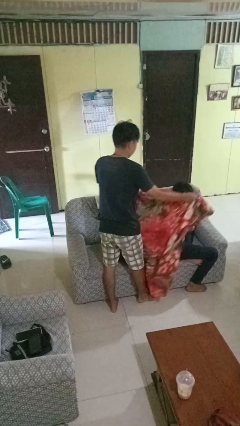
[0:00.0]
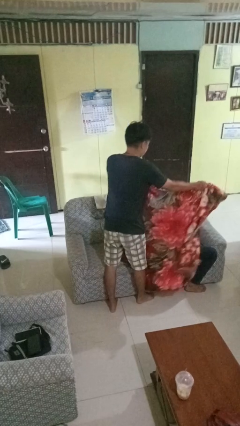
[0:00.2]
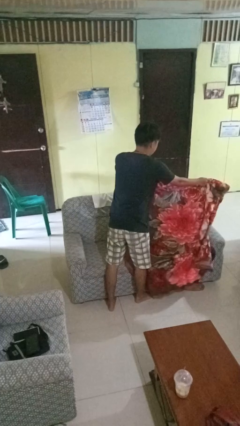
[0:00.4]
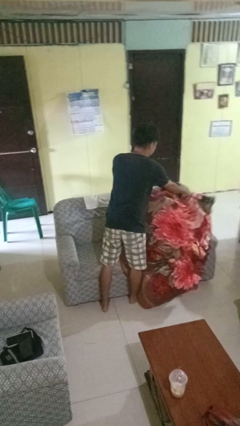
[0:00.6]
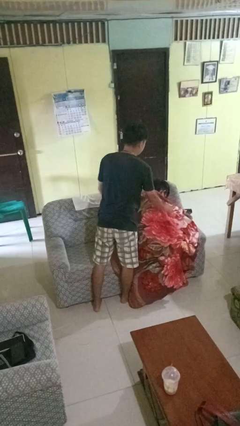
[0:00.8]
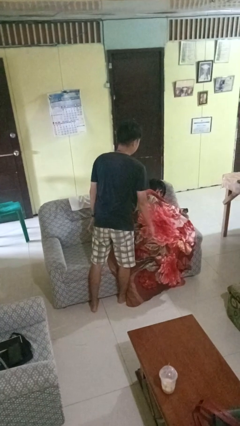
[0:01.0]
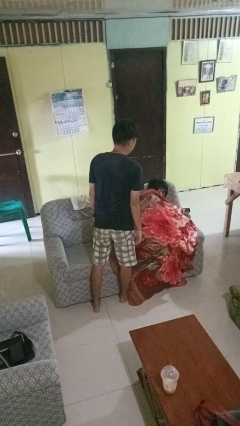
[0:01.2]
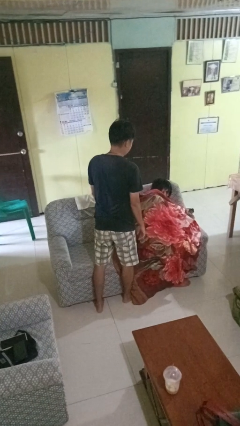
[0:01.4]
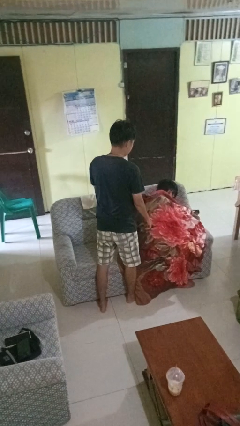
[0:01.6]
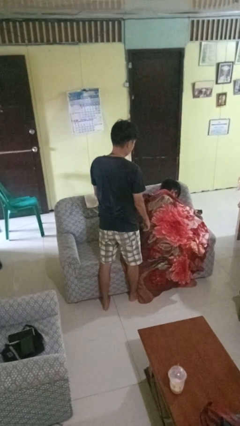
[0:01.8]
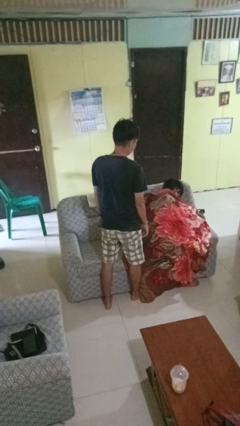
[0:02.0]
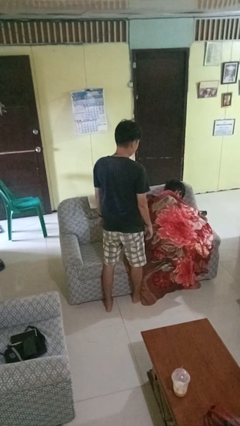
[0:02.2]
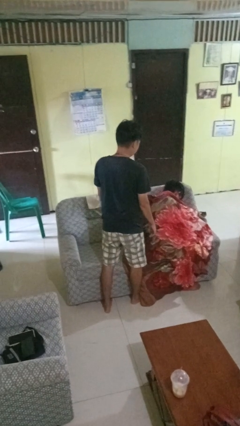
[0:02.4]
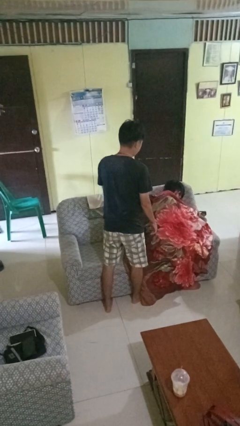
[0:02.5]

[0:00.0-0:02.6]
person covers friend with blanket

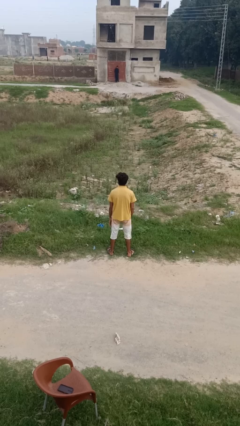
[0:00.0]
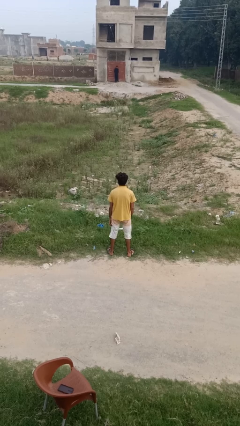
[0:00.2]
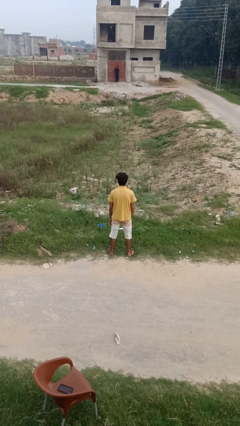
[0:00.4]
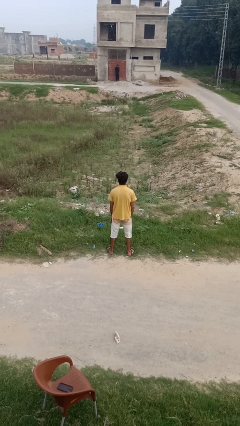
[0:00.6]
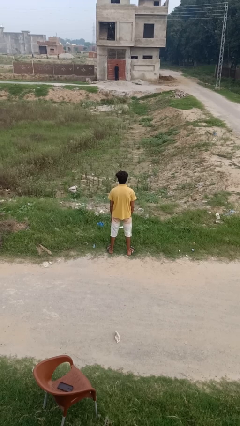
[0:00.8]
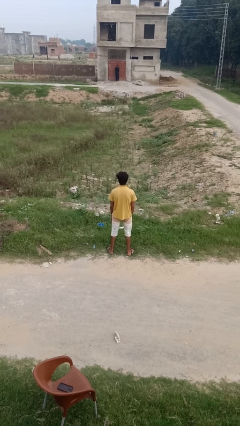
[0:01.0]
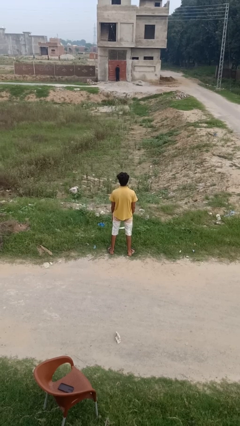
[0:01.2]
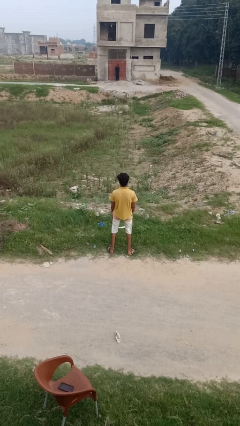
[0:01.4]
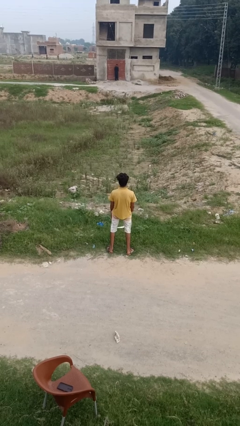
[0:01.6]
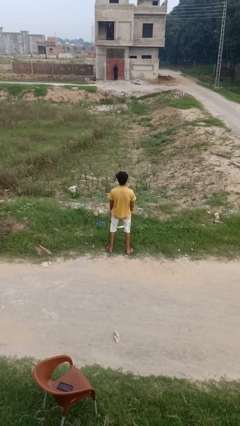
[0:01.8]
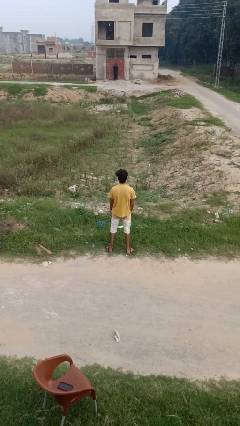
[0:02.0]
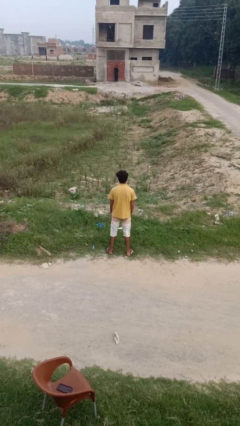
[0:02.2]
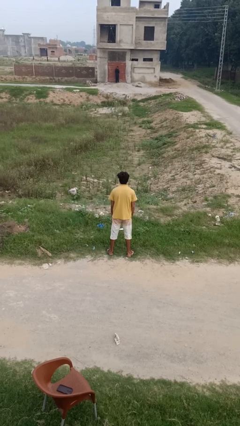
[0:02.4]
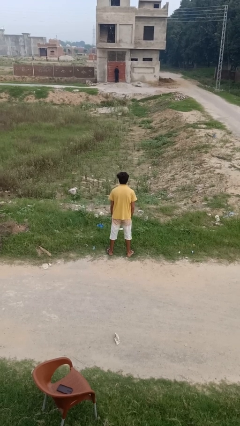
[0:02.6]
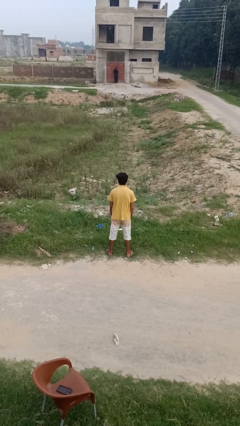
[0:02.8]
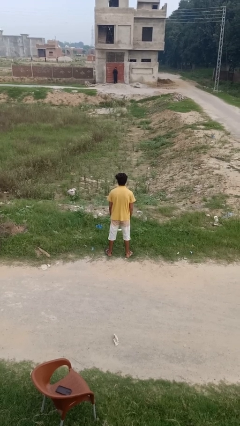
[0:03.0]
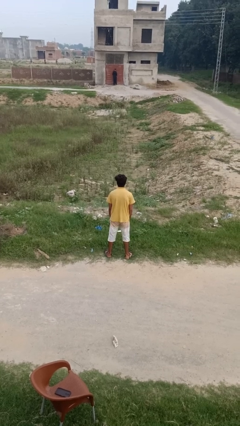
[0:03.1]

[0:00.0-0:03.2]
person wiggles hips

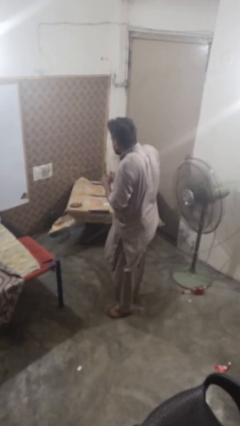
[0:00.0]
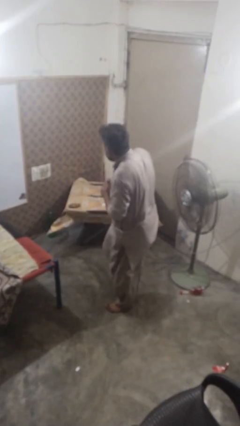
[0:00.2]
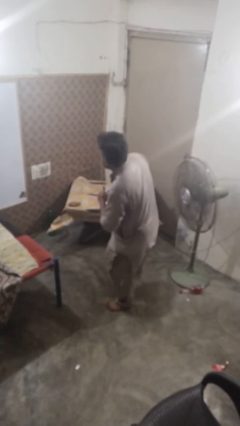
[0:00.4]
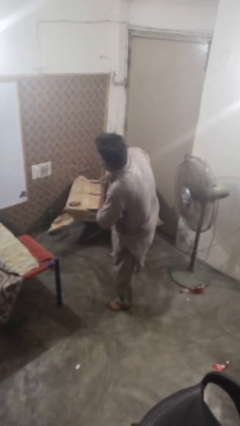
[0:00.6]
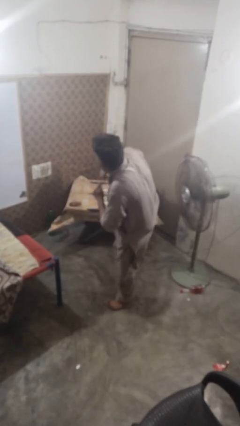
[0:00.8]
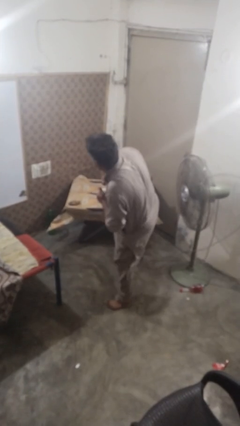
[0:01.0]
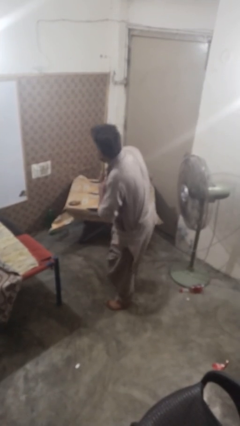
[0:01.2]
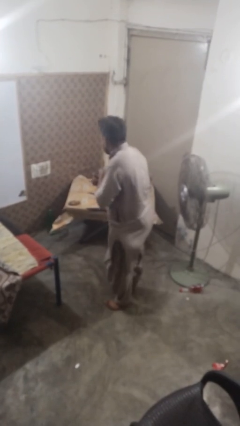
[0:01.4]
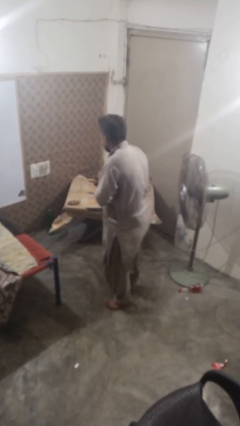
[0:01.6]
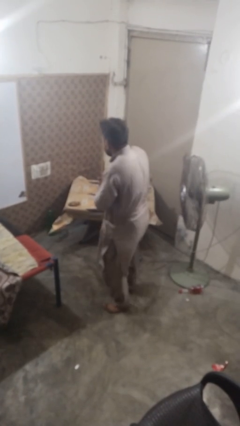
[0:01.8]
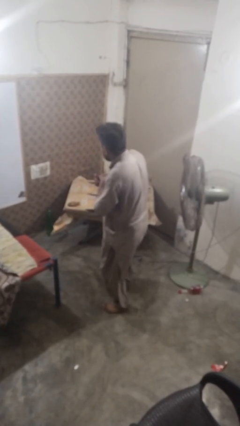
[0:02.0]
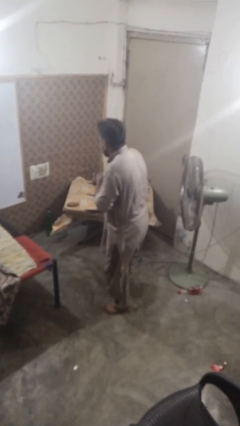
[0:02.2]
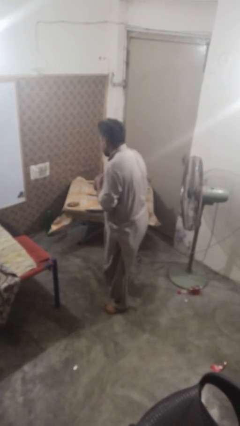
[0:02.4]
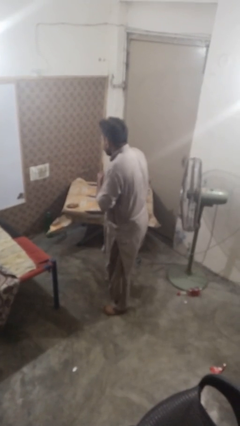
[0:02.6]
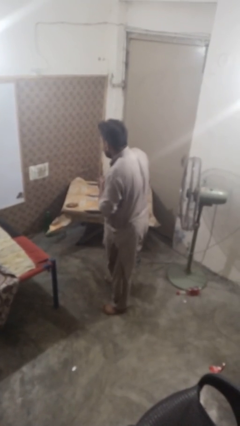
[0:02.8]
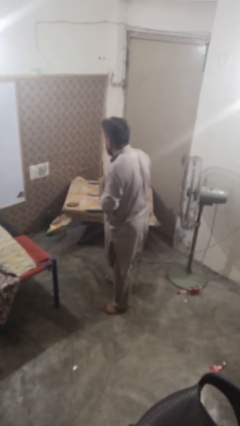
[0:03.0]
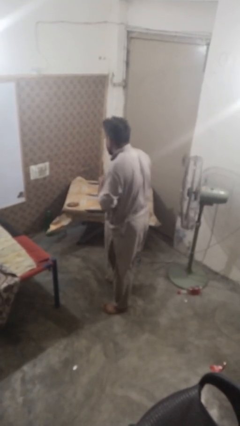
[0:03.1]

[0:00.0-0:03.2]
person karate kicks

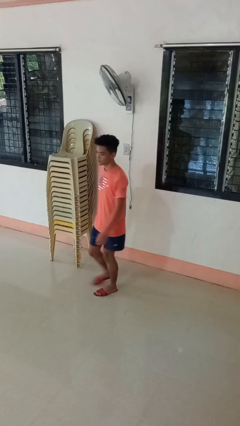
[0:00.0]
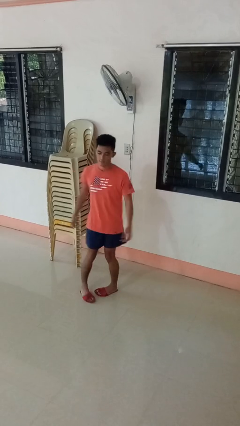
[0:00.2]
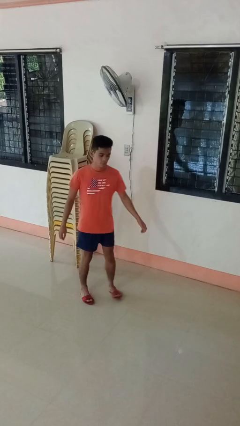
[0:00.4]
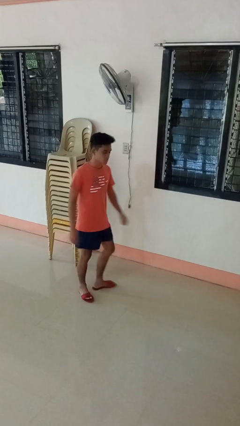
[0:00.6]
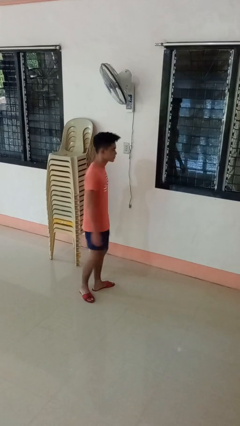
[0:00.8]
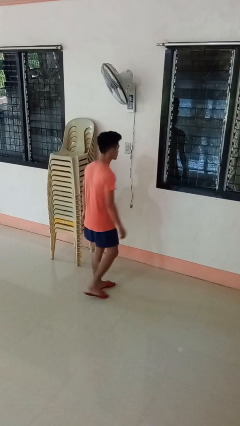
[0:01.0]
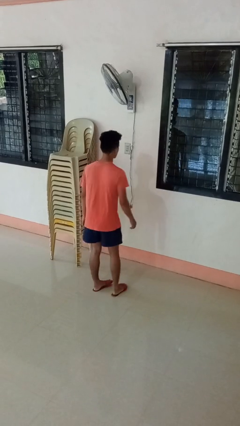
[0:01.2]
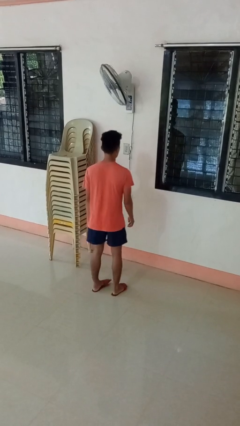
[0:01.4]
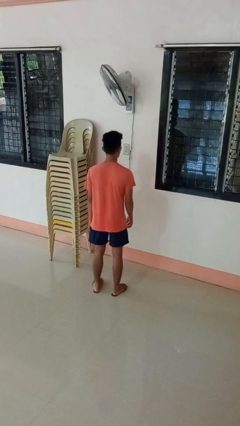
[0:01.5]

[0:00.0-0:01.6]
person twirls

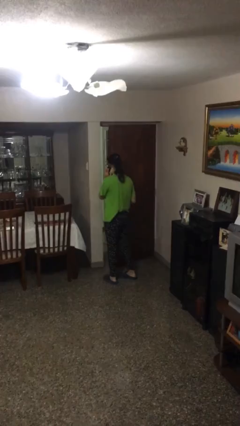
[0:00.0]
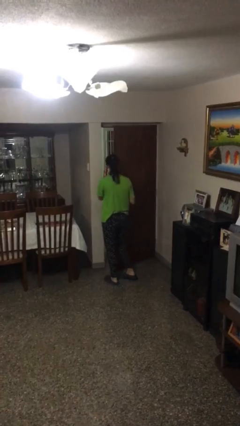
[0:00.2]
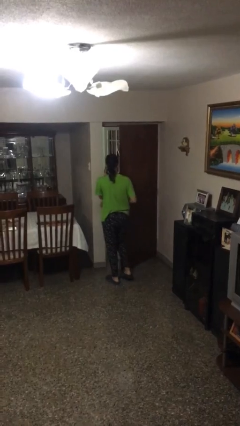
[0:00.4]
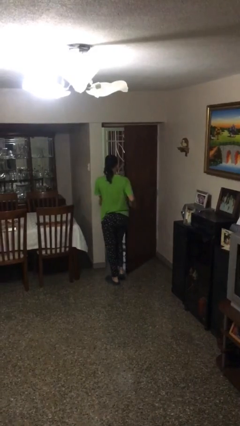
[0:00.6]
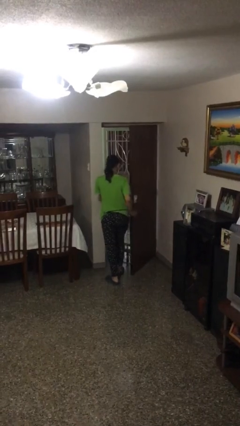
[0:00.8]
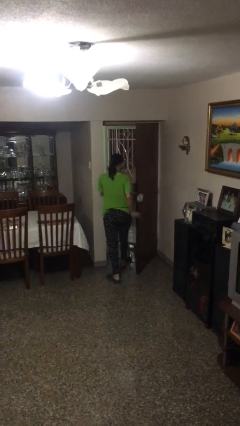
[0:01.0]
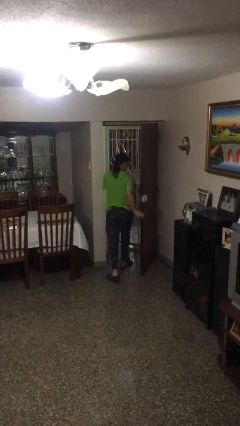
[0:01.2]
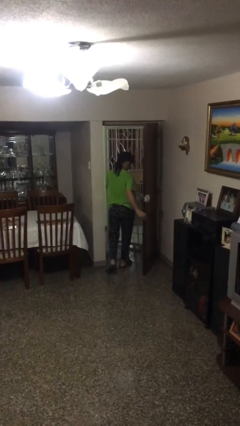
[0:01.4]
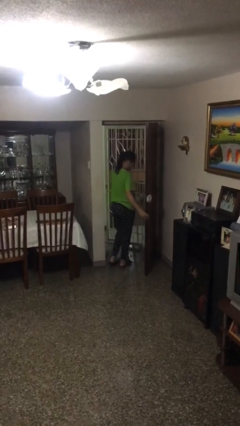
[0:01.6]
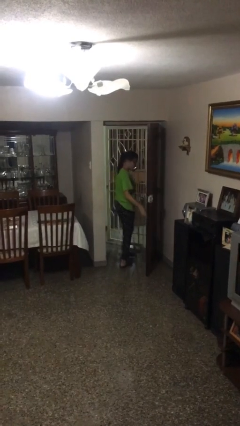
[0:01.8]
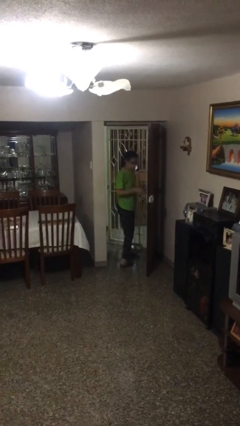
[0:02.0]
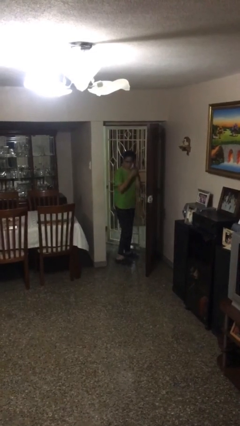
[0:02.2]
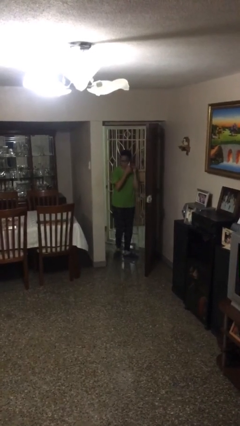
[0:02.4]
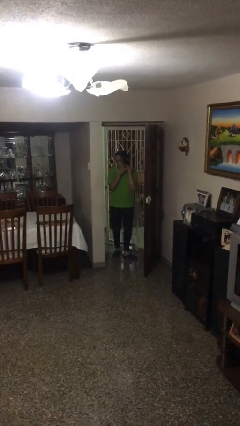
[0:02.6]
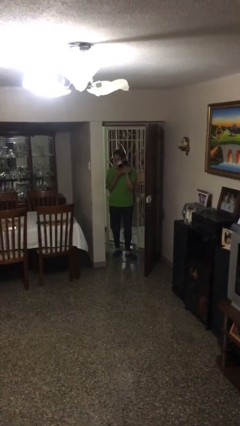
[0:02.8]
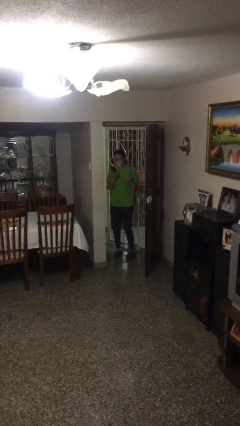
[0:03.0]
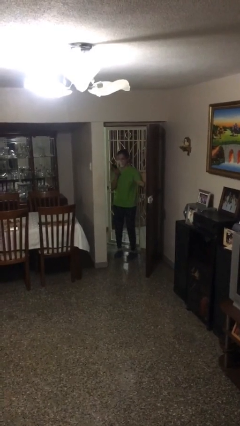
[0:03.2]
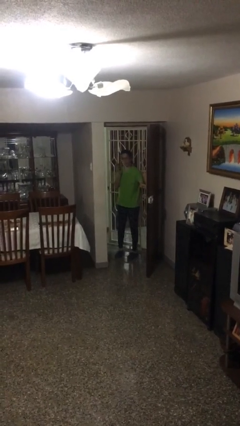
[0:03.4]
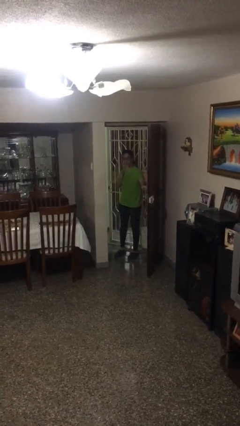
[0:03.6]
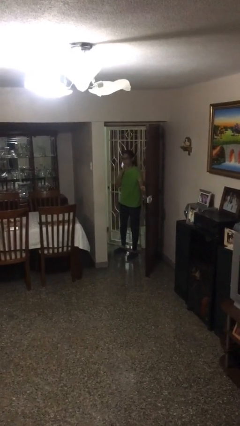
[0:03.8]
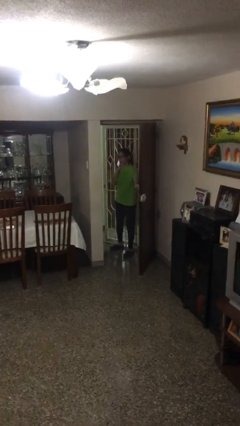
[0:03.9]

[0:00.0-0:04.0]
person exits scene through structure

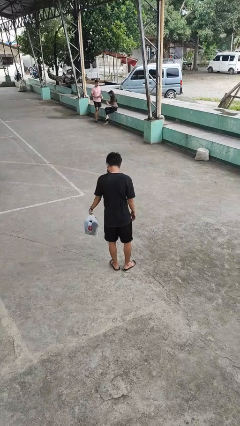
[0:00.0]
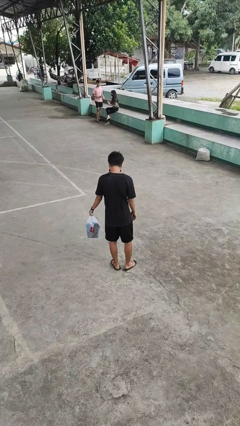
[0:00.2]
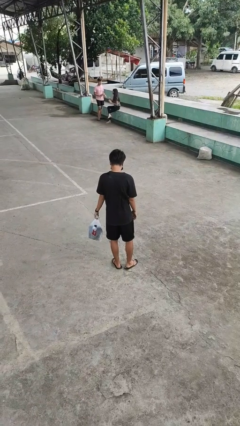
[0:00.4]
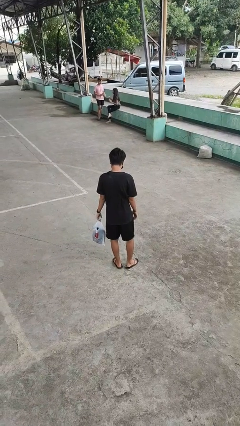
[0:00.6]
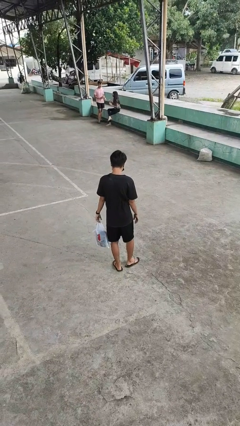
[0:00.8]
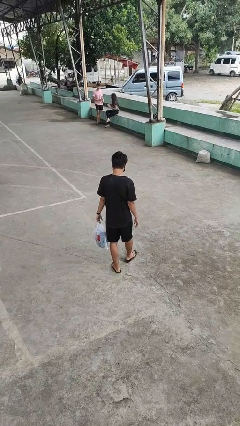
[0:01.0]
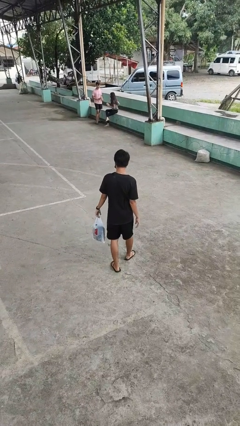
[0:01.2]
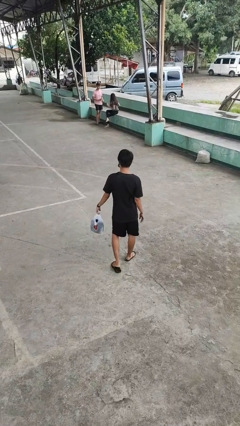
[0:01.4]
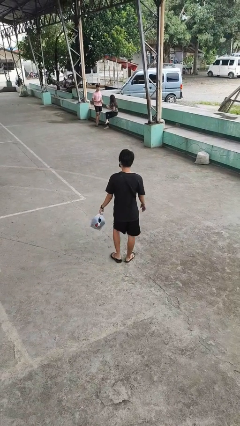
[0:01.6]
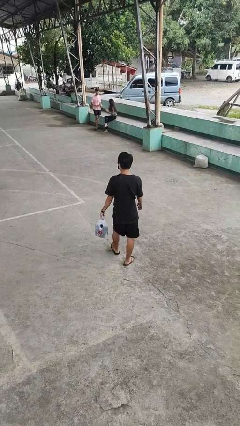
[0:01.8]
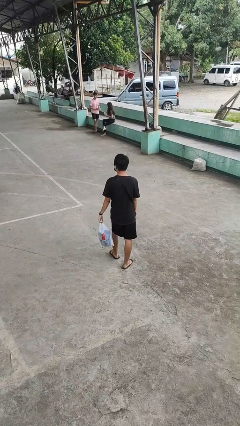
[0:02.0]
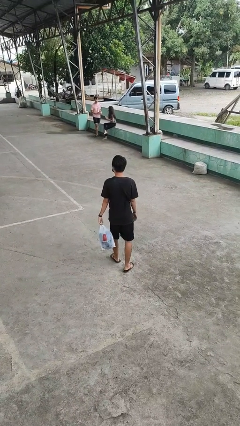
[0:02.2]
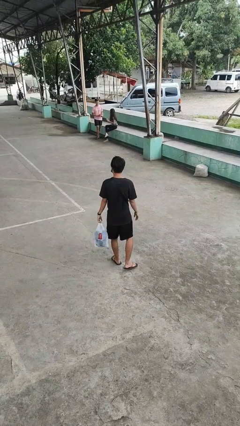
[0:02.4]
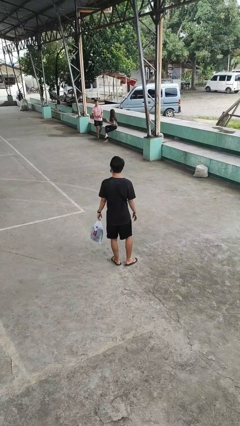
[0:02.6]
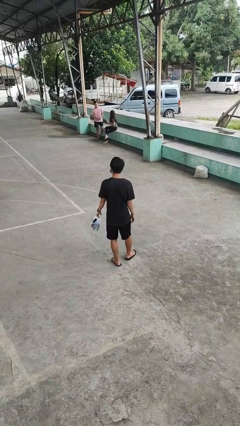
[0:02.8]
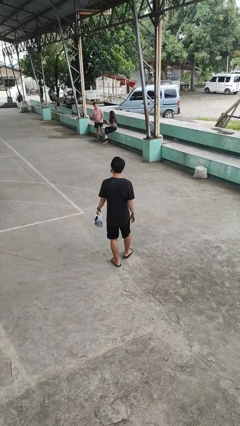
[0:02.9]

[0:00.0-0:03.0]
person carries groceries

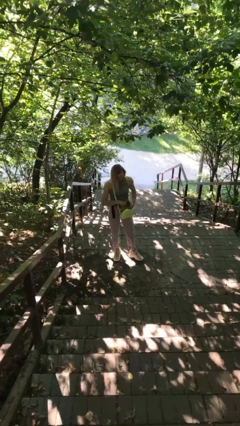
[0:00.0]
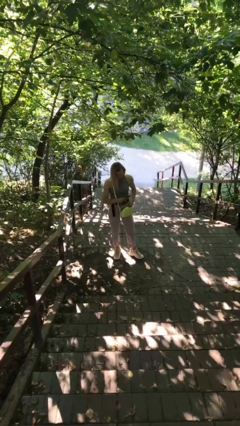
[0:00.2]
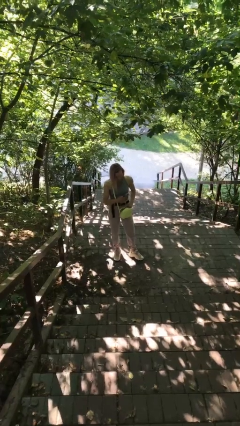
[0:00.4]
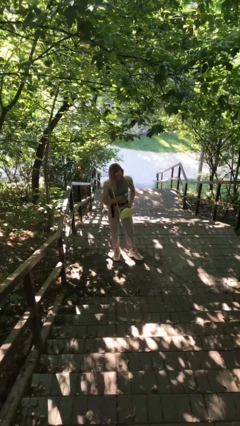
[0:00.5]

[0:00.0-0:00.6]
person takes object from purse
